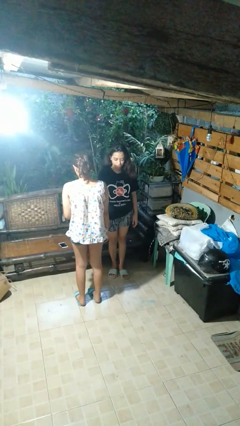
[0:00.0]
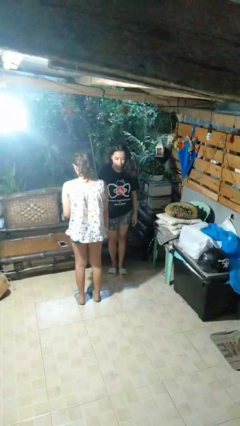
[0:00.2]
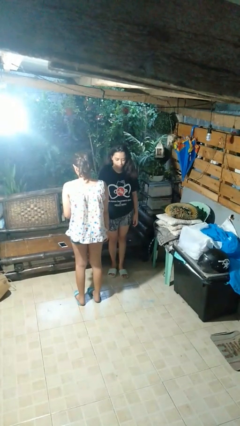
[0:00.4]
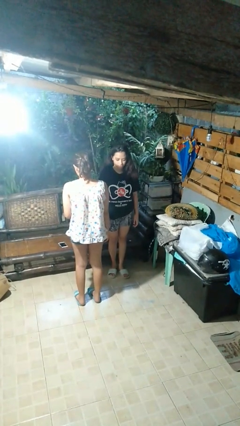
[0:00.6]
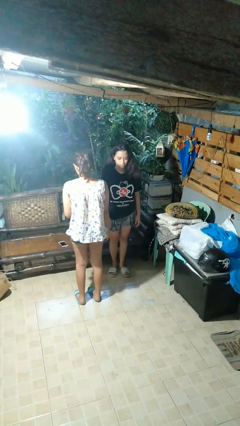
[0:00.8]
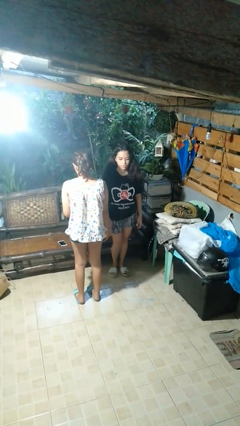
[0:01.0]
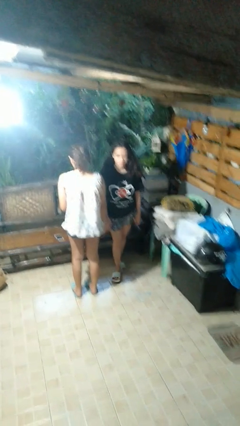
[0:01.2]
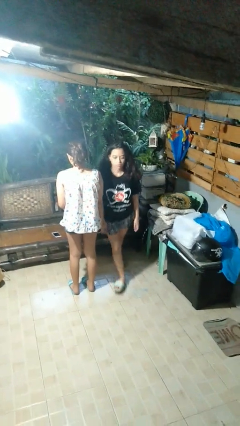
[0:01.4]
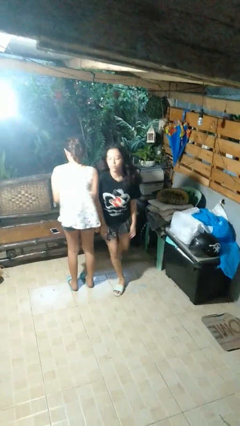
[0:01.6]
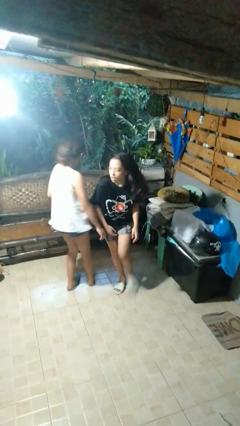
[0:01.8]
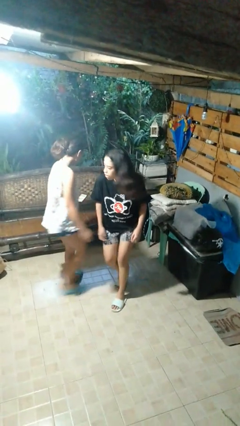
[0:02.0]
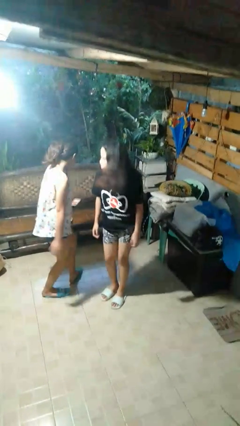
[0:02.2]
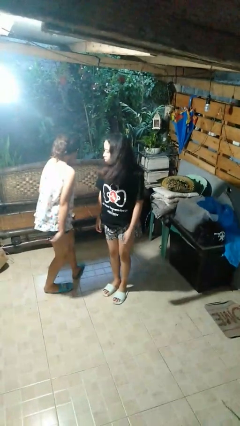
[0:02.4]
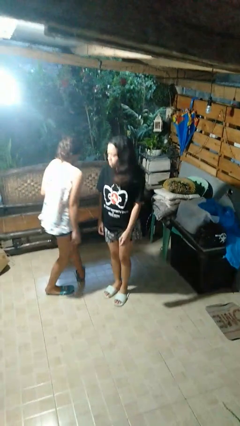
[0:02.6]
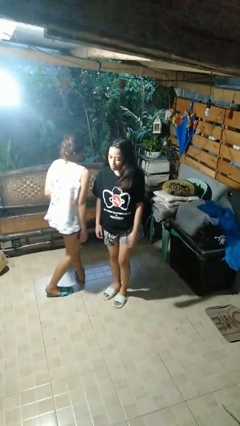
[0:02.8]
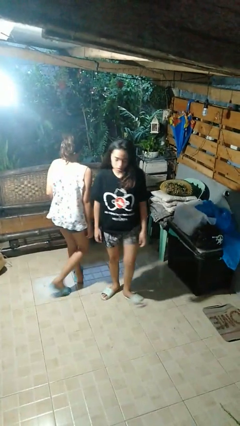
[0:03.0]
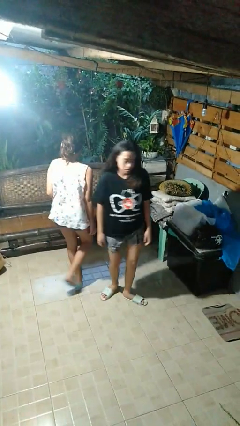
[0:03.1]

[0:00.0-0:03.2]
person bumps into person

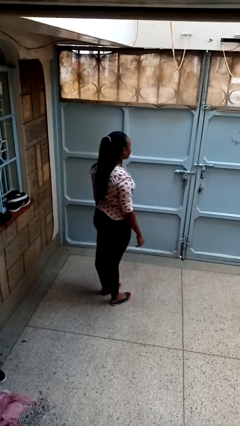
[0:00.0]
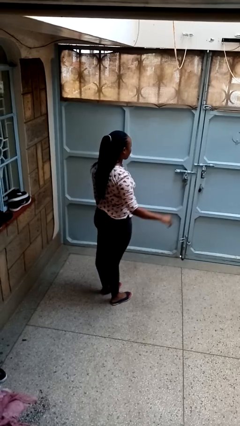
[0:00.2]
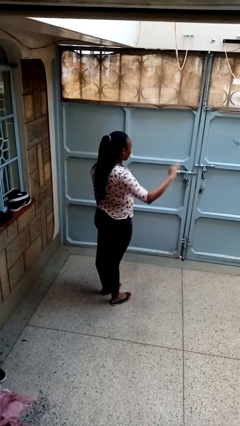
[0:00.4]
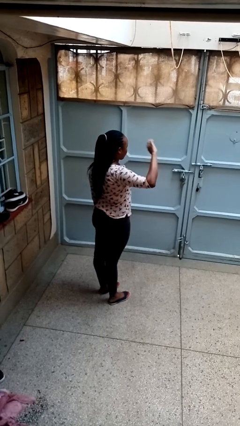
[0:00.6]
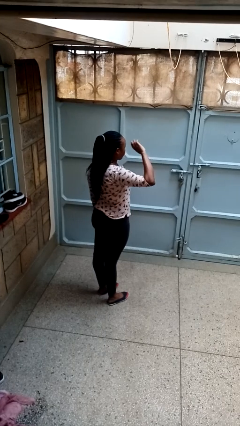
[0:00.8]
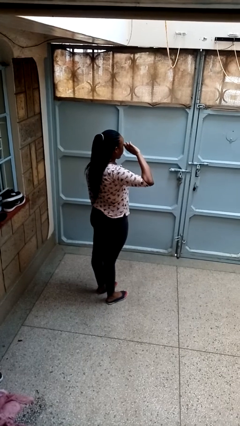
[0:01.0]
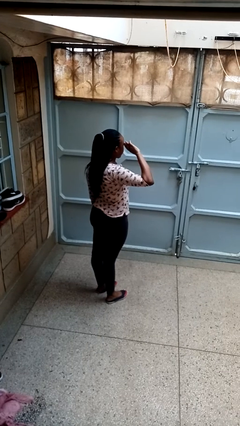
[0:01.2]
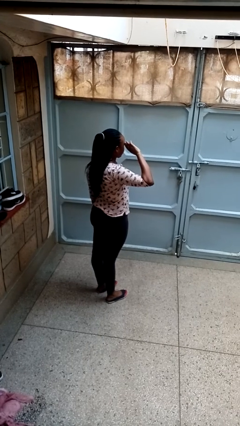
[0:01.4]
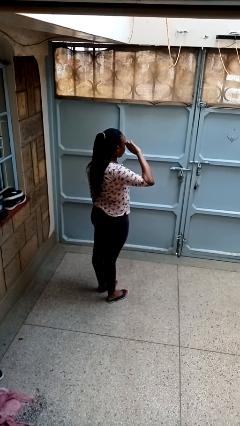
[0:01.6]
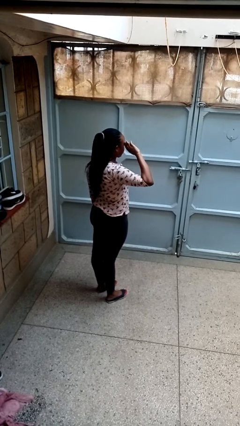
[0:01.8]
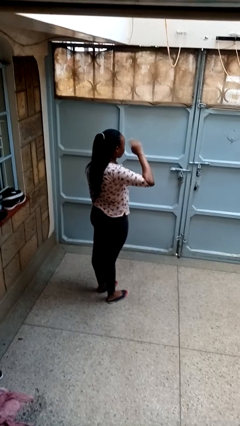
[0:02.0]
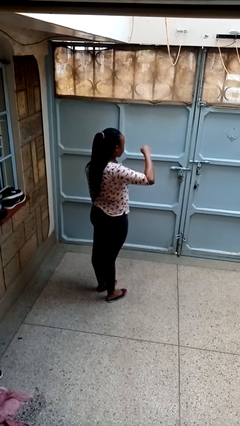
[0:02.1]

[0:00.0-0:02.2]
person salutes

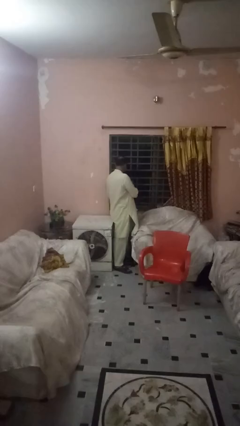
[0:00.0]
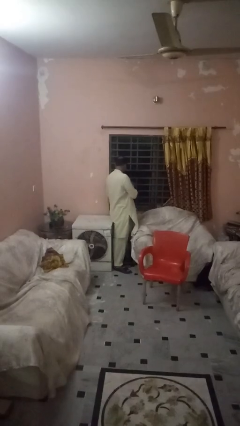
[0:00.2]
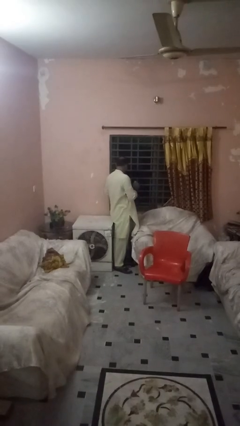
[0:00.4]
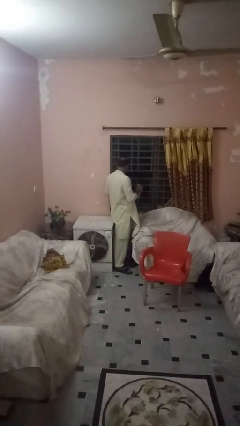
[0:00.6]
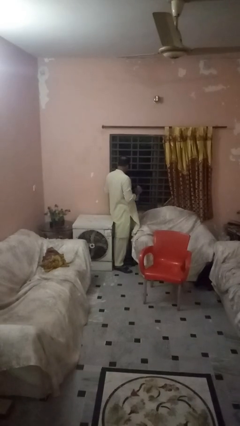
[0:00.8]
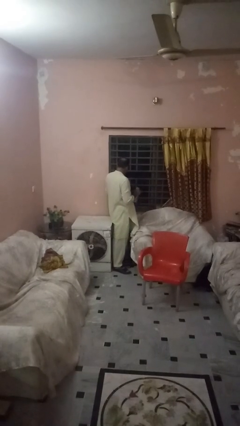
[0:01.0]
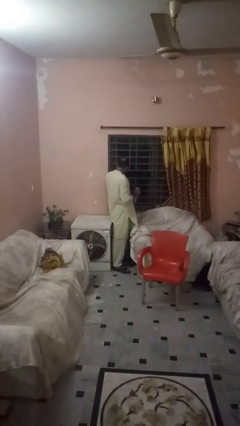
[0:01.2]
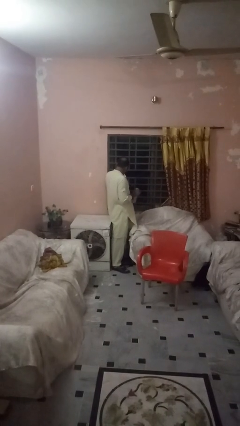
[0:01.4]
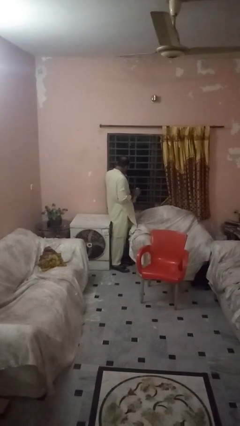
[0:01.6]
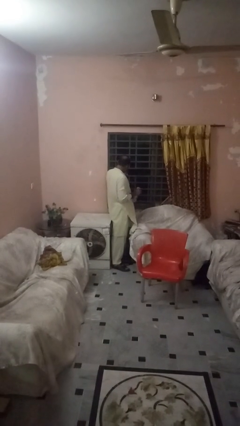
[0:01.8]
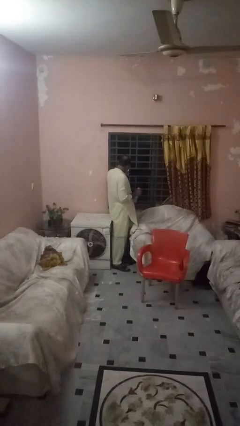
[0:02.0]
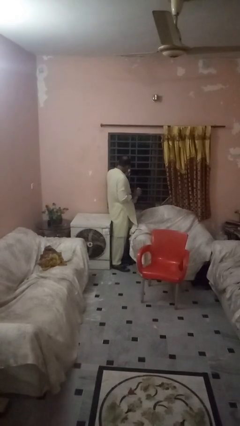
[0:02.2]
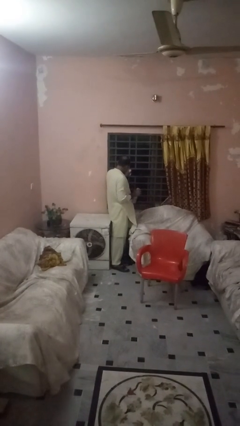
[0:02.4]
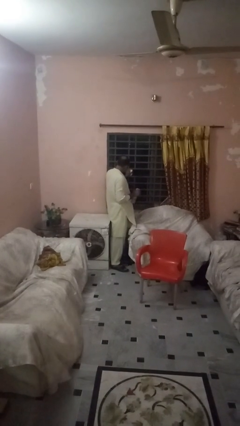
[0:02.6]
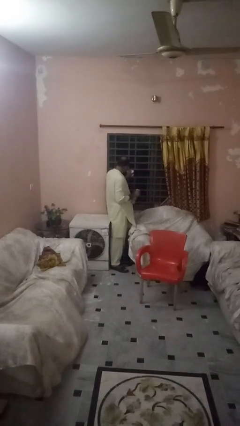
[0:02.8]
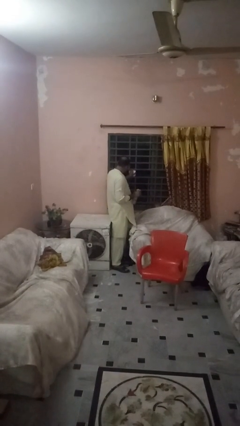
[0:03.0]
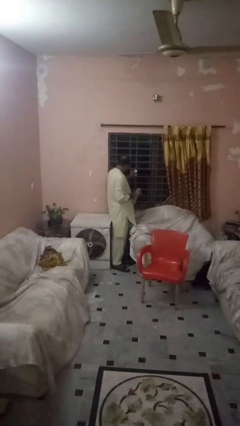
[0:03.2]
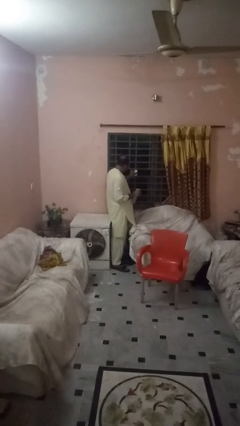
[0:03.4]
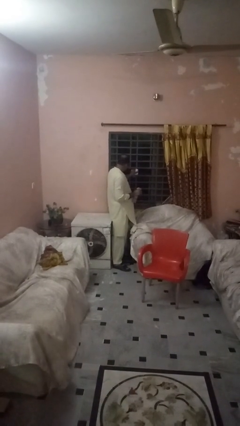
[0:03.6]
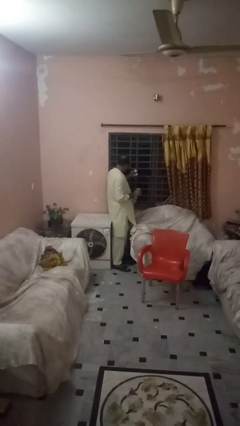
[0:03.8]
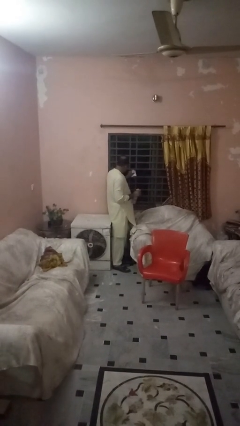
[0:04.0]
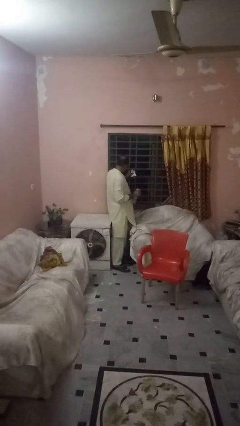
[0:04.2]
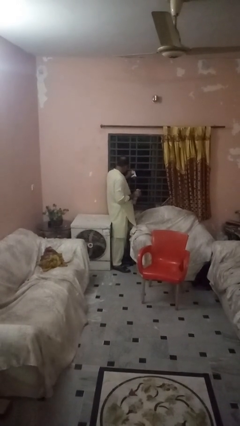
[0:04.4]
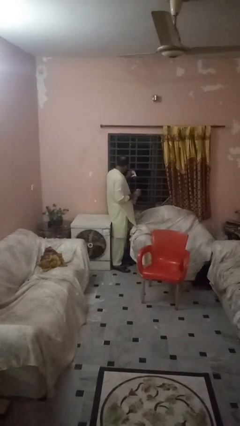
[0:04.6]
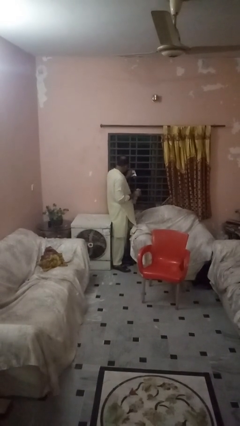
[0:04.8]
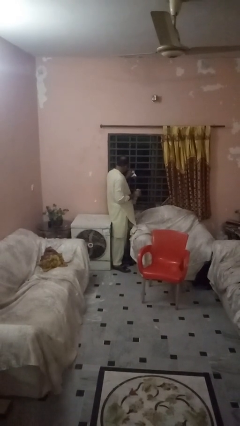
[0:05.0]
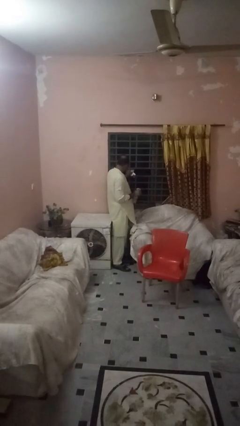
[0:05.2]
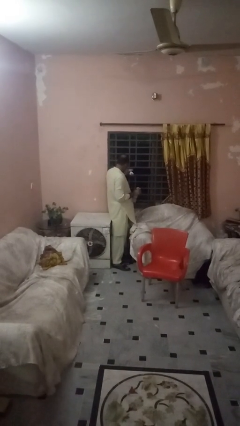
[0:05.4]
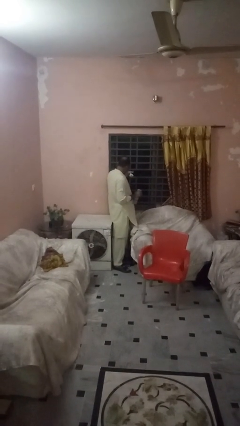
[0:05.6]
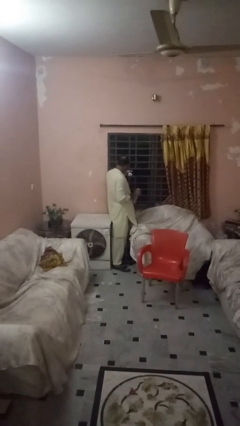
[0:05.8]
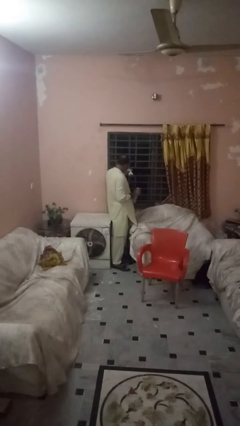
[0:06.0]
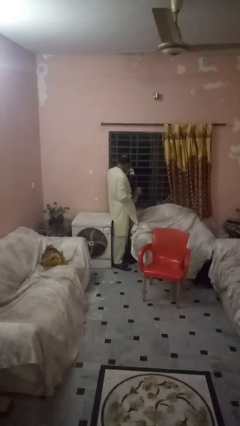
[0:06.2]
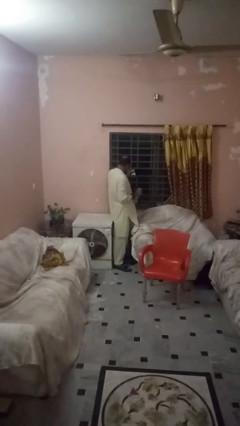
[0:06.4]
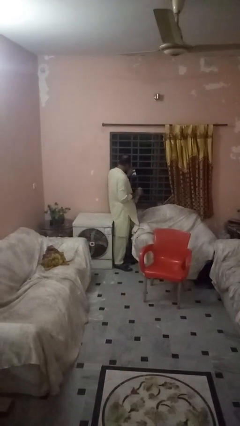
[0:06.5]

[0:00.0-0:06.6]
person washes window

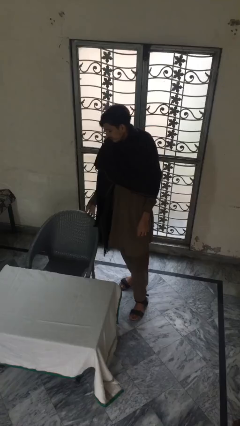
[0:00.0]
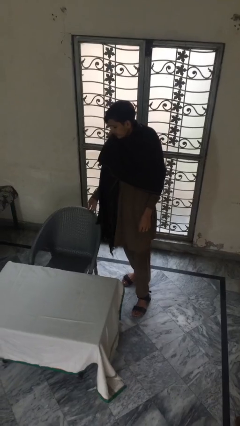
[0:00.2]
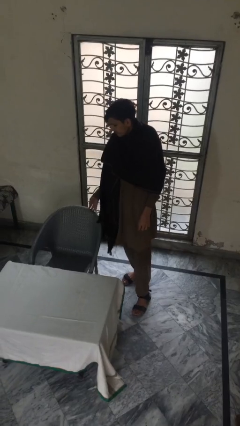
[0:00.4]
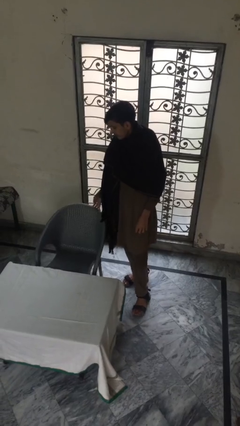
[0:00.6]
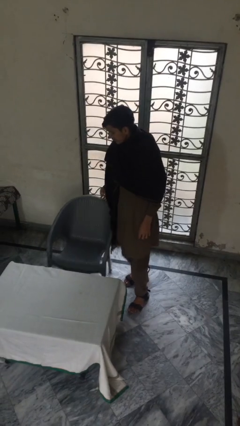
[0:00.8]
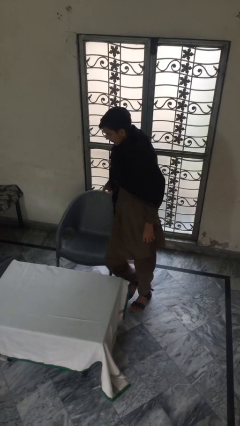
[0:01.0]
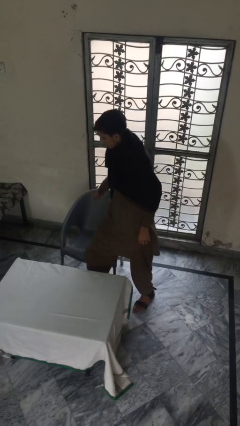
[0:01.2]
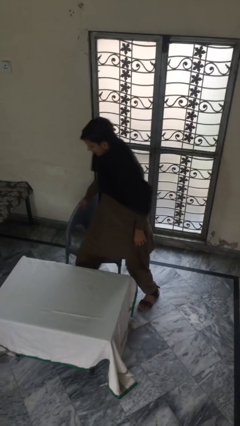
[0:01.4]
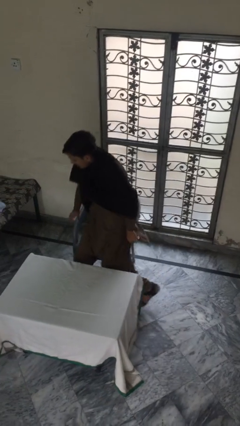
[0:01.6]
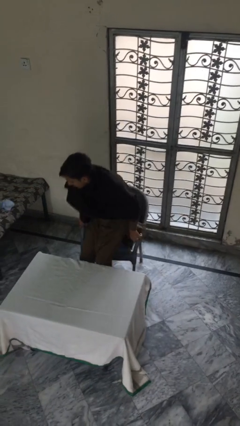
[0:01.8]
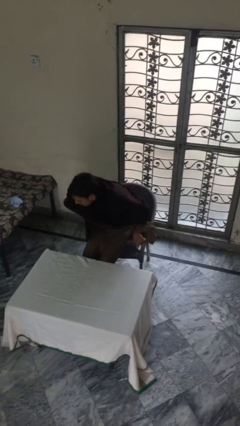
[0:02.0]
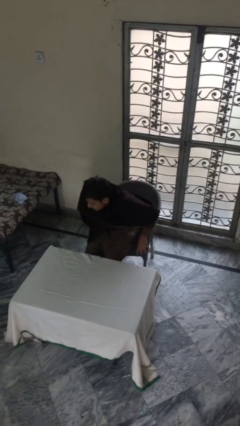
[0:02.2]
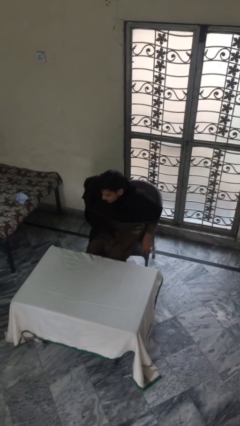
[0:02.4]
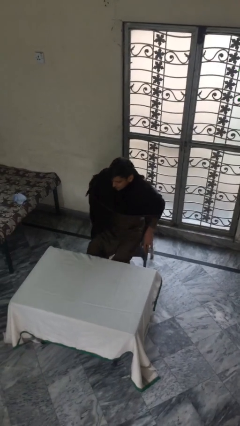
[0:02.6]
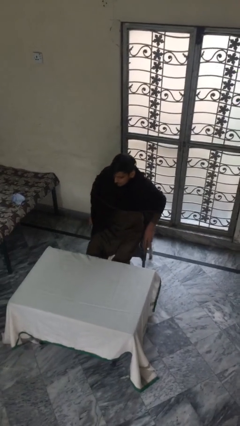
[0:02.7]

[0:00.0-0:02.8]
person sits down

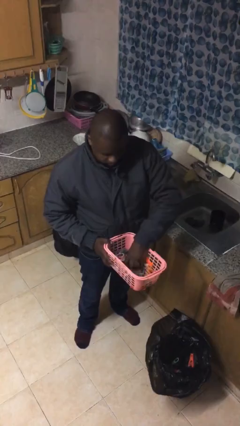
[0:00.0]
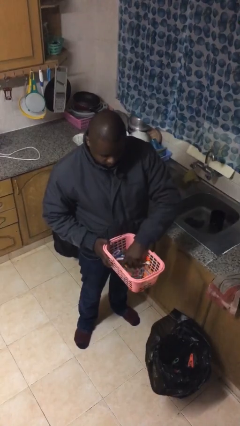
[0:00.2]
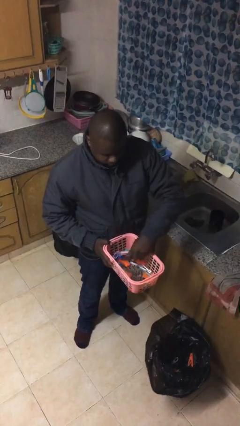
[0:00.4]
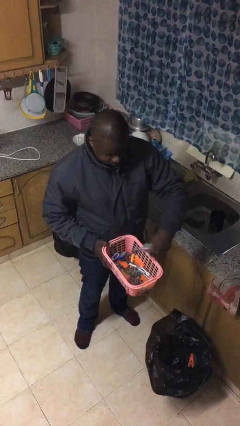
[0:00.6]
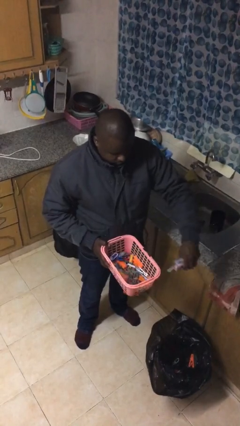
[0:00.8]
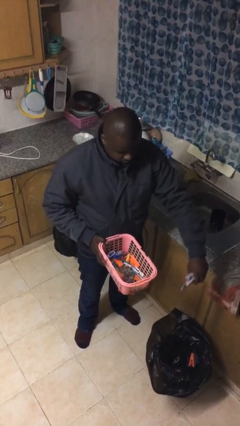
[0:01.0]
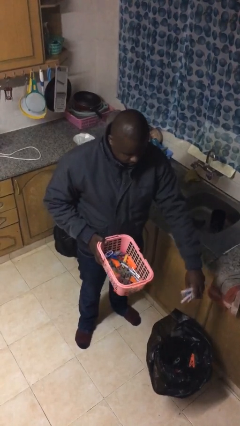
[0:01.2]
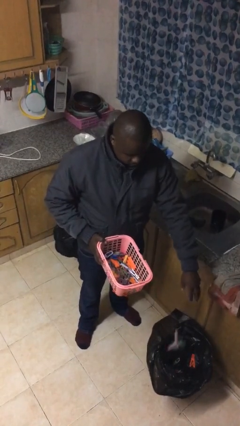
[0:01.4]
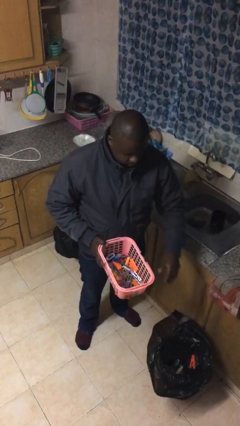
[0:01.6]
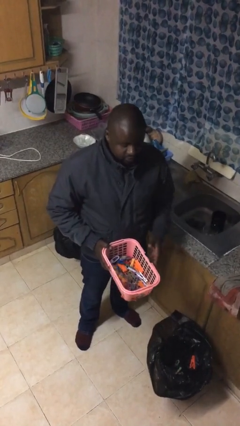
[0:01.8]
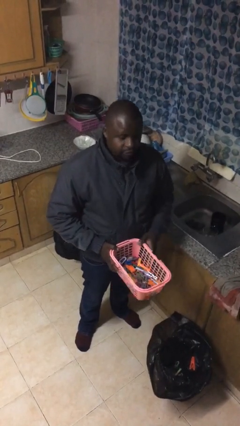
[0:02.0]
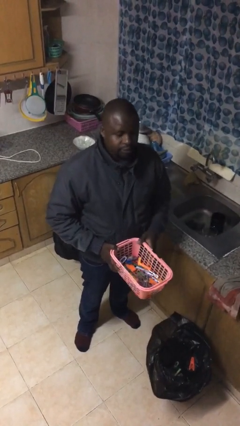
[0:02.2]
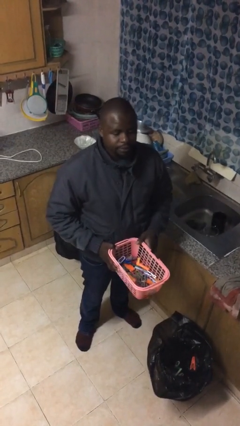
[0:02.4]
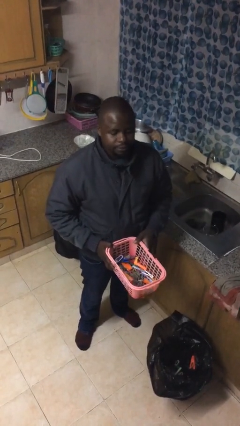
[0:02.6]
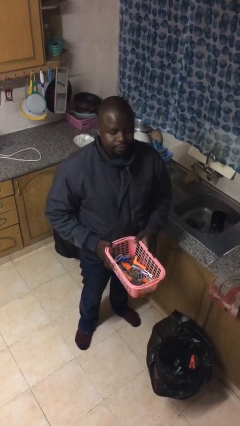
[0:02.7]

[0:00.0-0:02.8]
person discards trash
